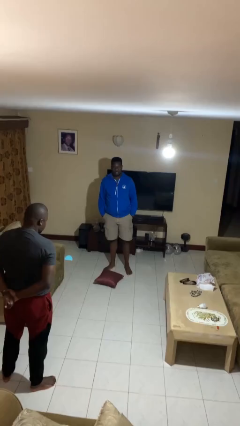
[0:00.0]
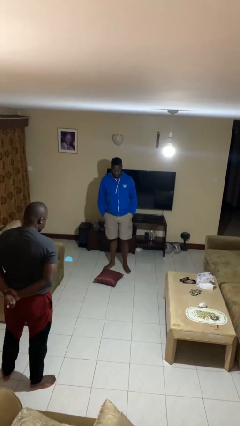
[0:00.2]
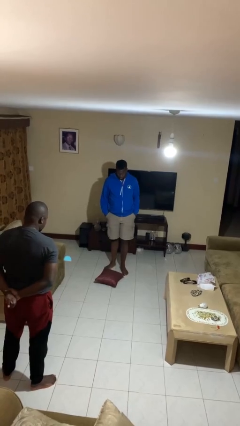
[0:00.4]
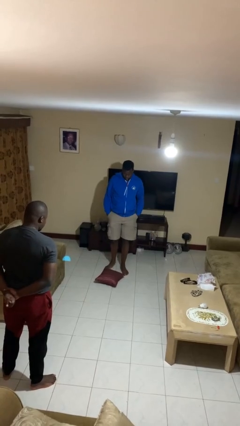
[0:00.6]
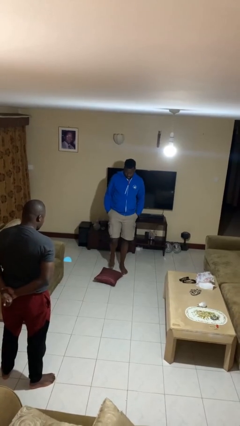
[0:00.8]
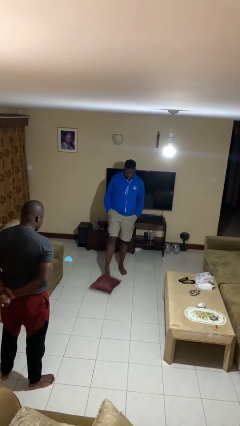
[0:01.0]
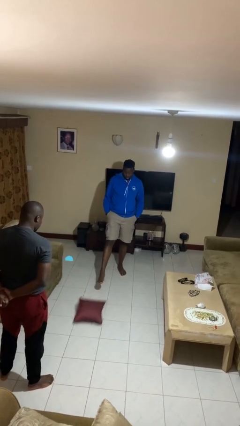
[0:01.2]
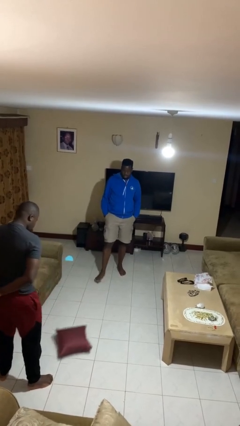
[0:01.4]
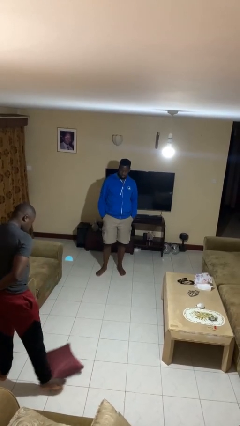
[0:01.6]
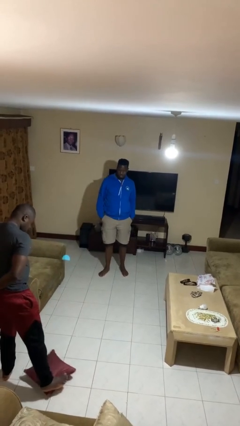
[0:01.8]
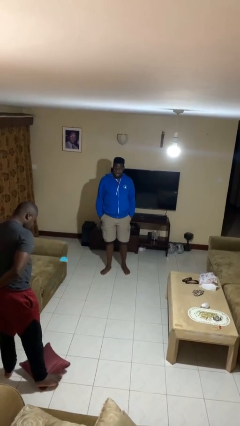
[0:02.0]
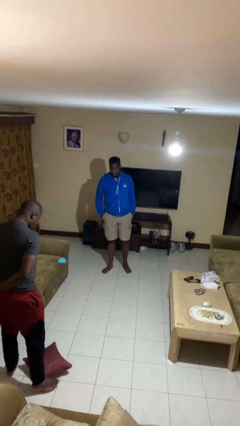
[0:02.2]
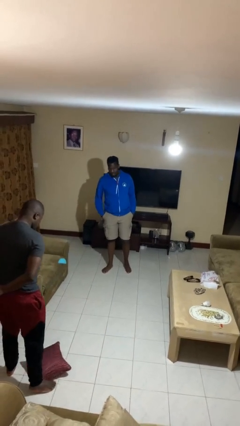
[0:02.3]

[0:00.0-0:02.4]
person kicks object to person

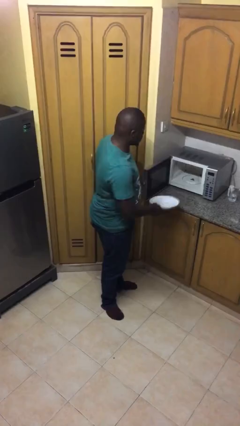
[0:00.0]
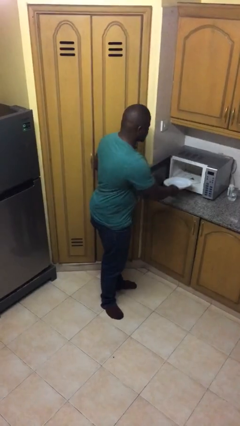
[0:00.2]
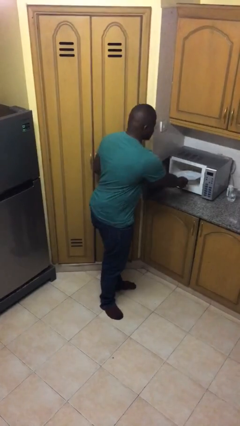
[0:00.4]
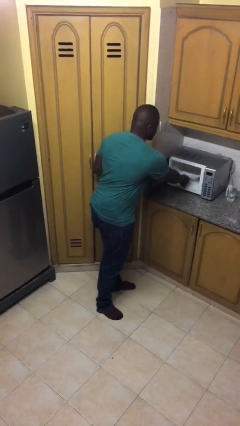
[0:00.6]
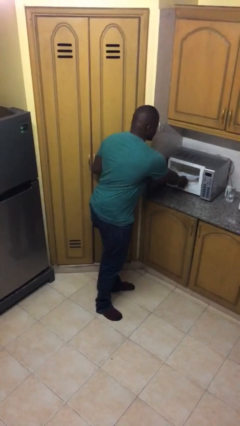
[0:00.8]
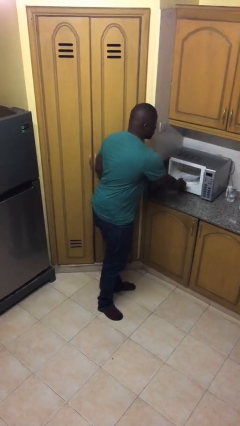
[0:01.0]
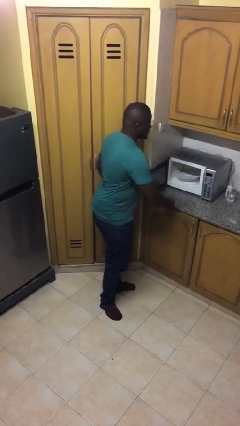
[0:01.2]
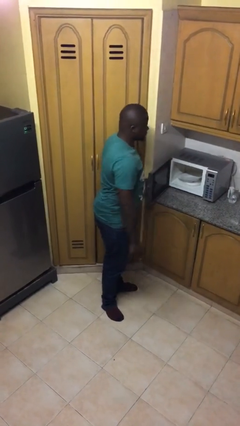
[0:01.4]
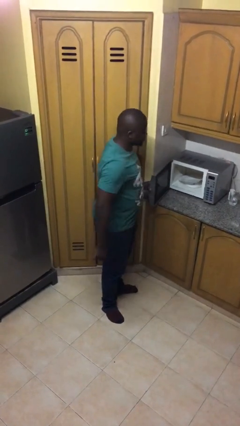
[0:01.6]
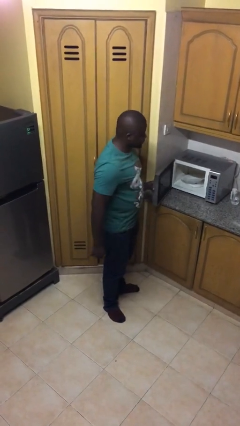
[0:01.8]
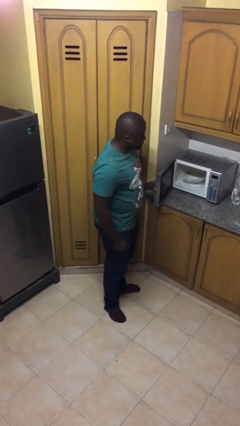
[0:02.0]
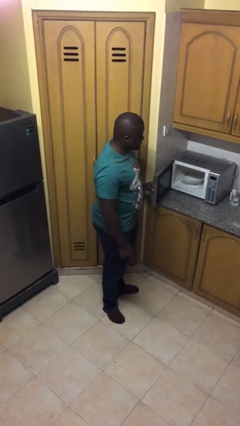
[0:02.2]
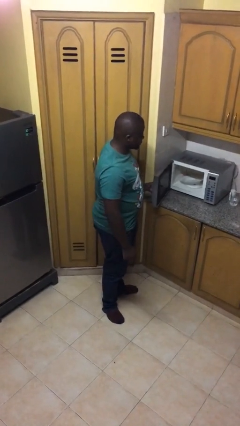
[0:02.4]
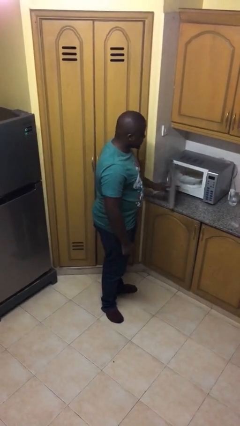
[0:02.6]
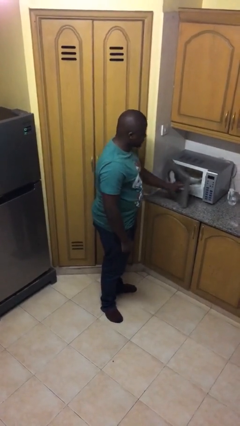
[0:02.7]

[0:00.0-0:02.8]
person puts object into microwave

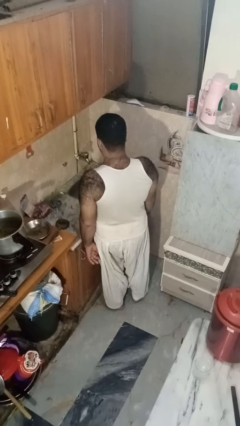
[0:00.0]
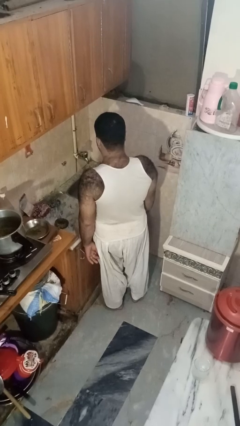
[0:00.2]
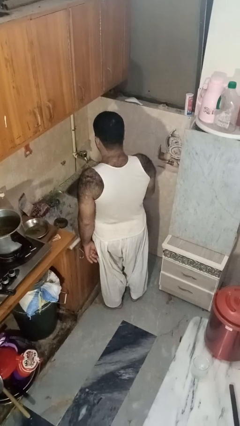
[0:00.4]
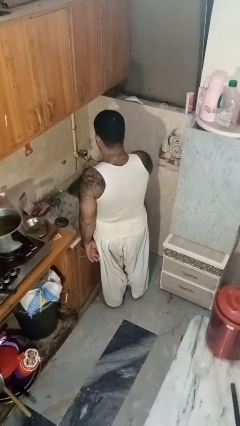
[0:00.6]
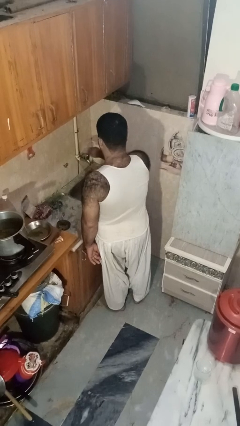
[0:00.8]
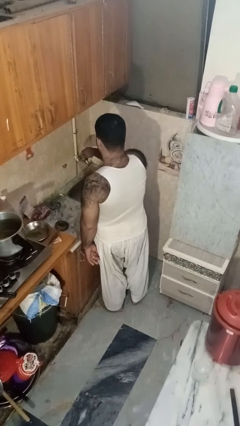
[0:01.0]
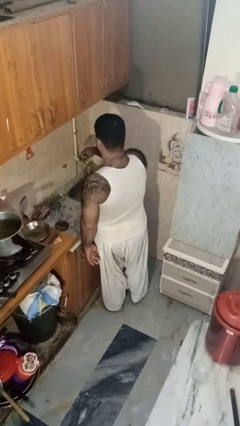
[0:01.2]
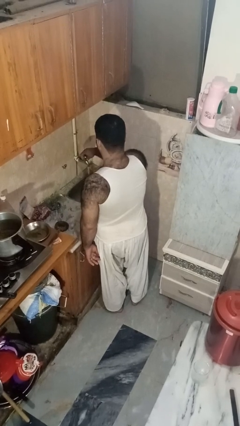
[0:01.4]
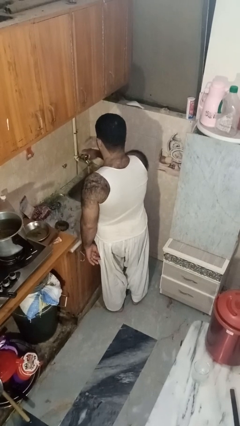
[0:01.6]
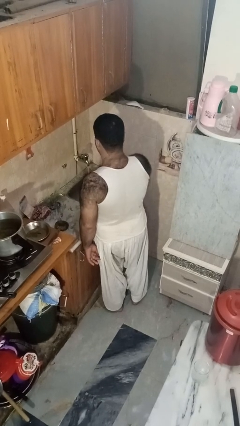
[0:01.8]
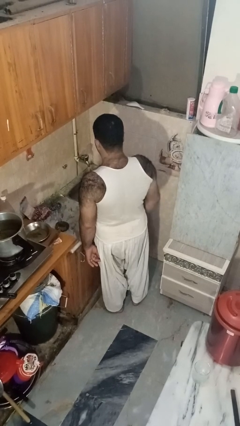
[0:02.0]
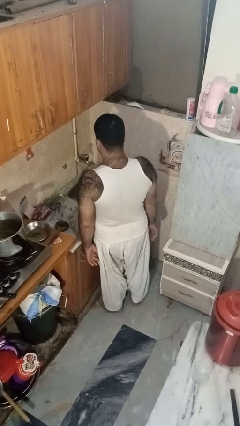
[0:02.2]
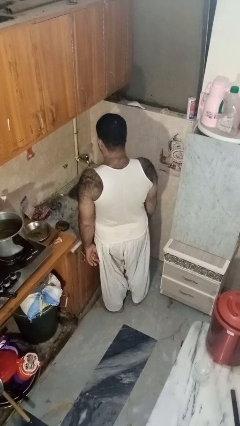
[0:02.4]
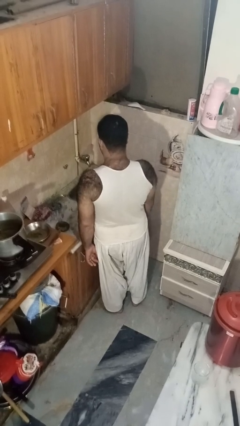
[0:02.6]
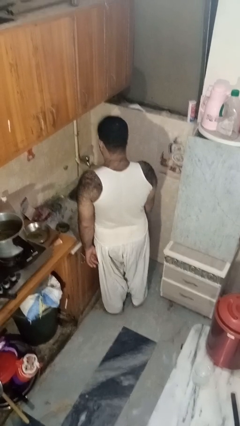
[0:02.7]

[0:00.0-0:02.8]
person turns on faucet

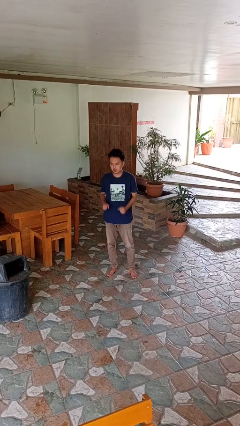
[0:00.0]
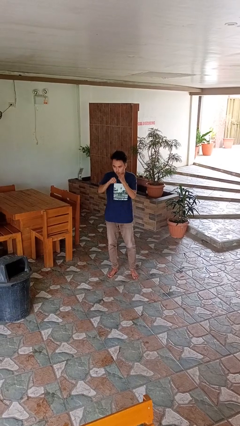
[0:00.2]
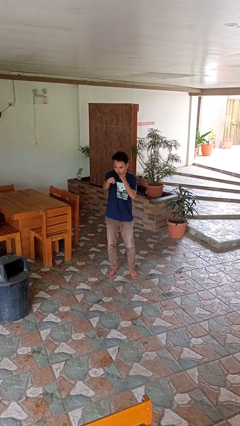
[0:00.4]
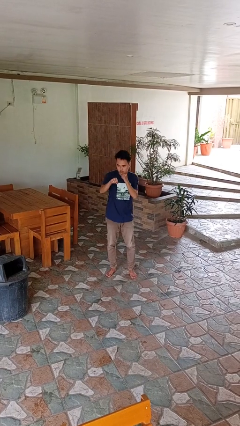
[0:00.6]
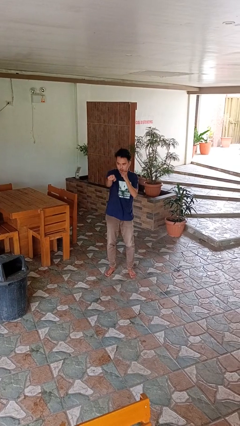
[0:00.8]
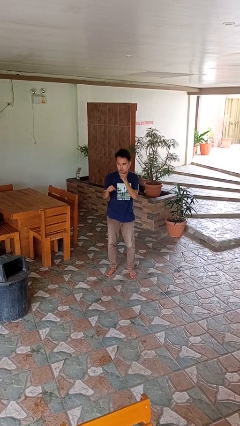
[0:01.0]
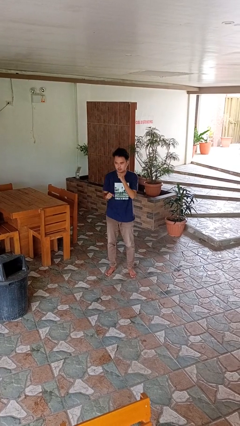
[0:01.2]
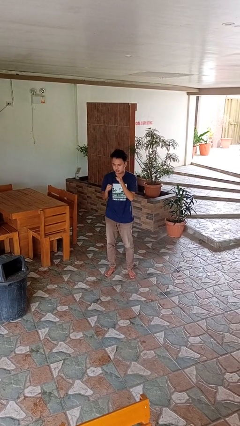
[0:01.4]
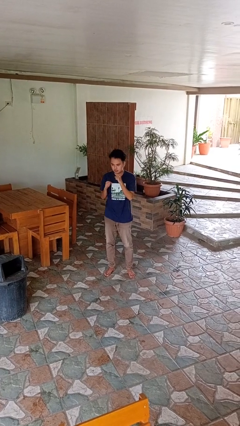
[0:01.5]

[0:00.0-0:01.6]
person punches

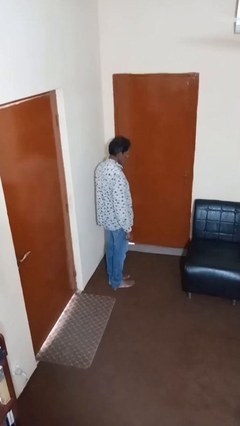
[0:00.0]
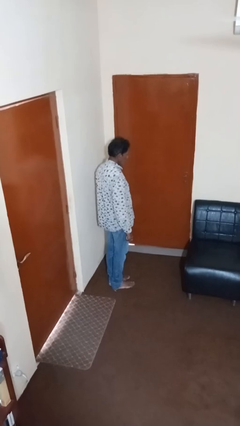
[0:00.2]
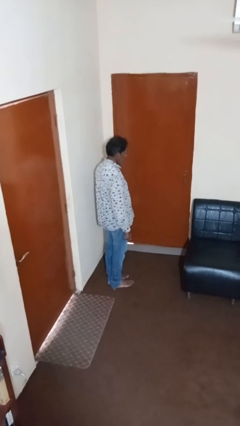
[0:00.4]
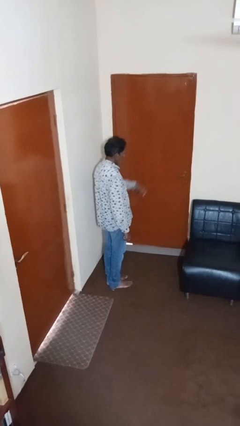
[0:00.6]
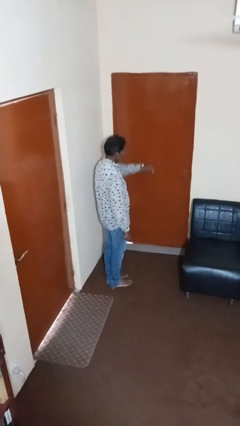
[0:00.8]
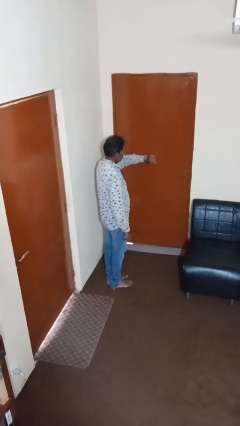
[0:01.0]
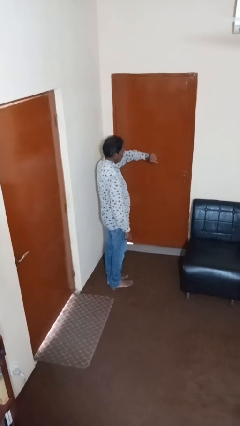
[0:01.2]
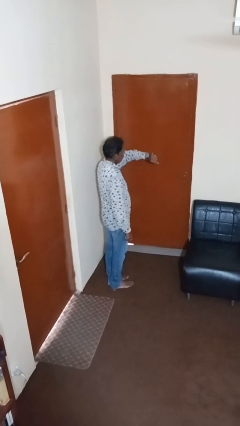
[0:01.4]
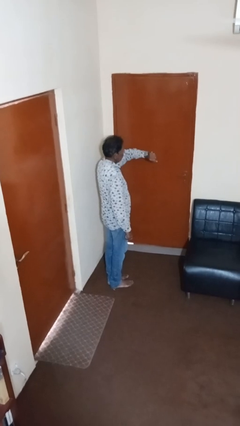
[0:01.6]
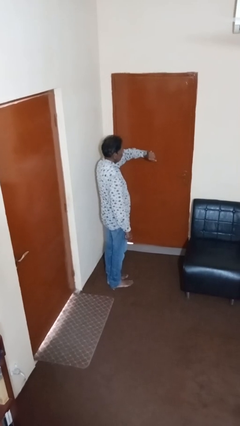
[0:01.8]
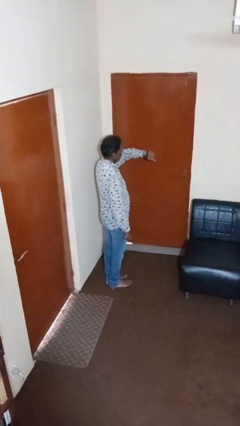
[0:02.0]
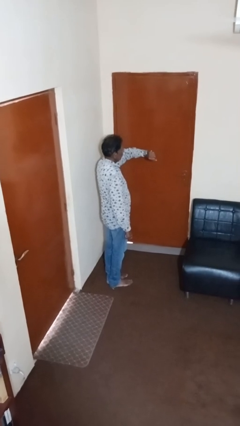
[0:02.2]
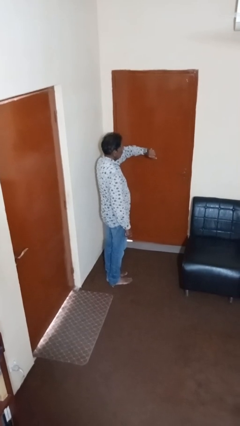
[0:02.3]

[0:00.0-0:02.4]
person looks at wristwatch

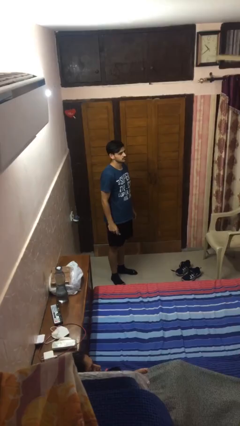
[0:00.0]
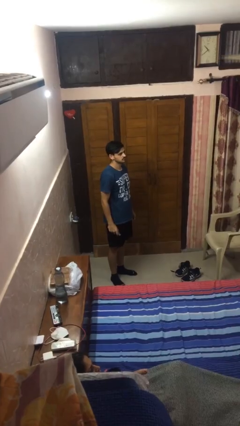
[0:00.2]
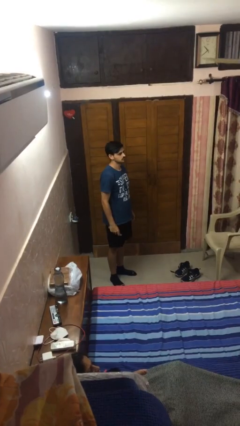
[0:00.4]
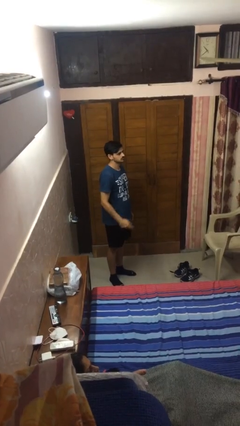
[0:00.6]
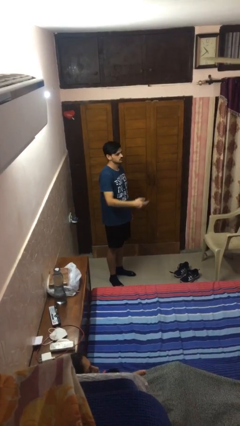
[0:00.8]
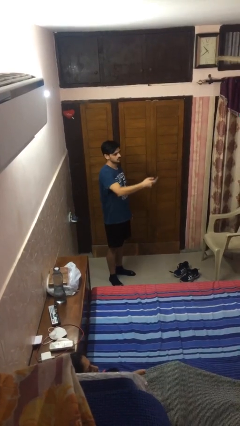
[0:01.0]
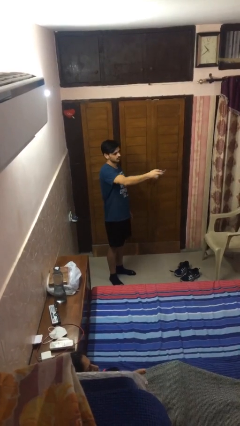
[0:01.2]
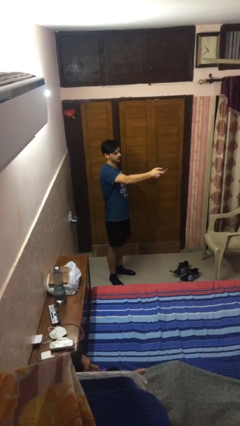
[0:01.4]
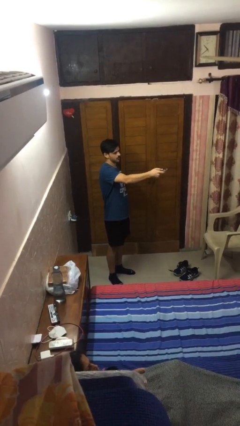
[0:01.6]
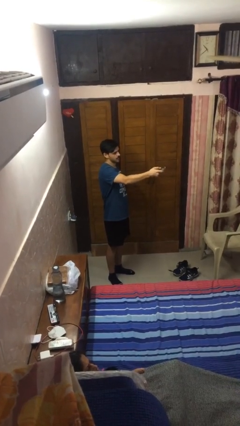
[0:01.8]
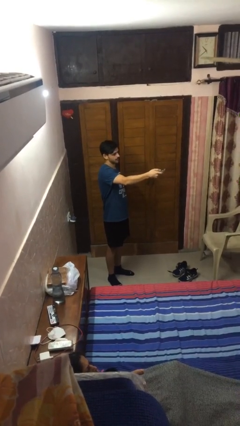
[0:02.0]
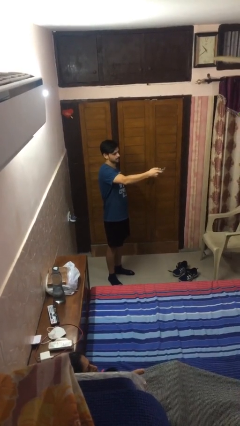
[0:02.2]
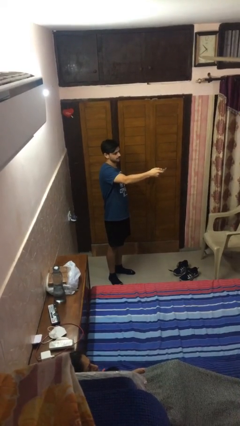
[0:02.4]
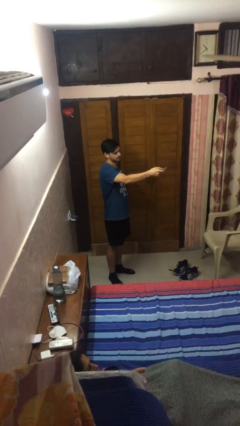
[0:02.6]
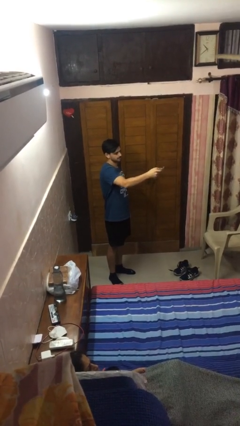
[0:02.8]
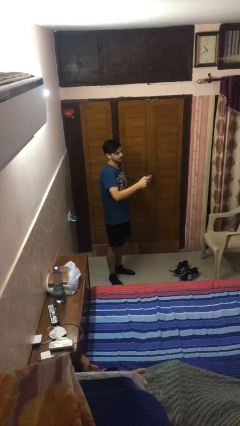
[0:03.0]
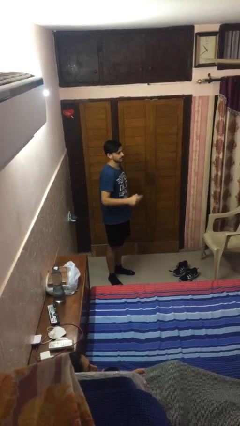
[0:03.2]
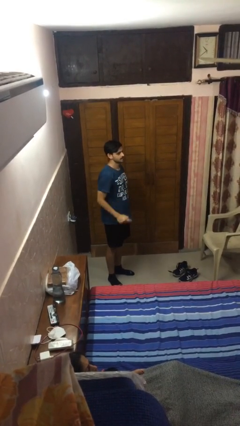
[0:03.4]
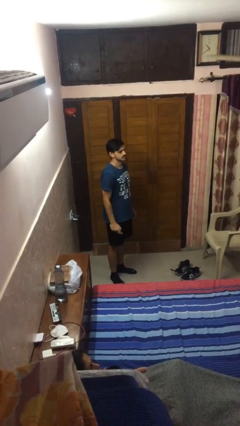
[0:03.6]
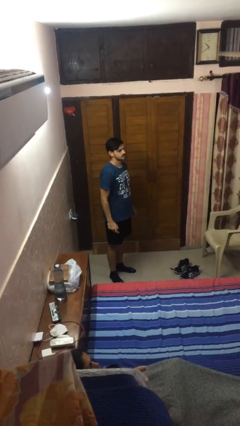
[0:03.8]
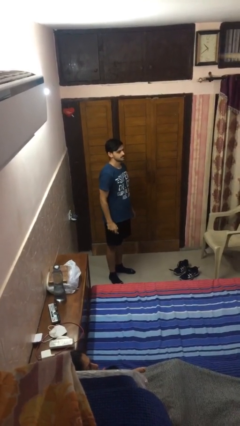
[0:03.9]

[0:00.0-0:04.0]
person uses television remote

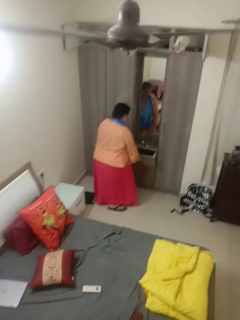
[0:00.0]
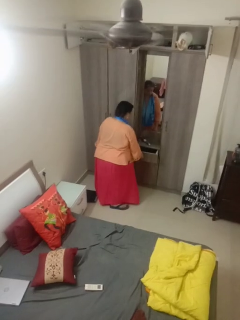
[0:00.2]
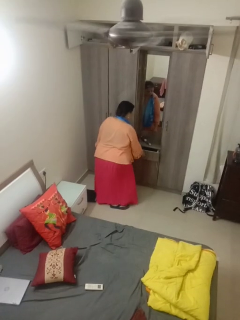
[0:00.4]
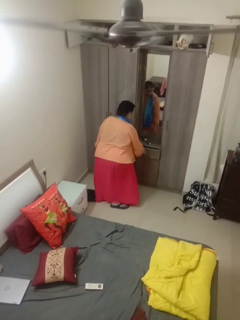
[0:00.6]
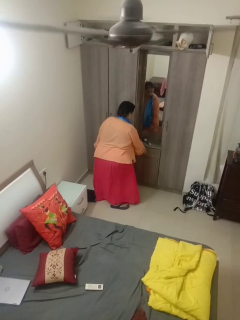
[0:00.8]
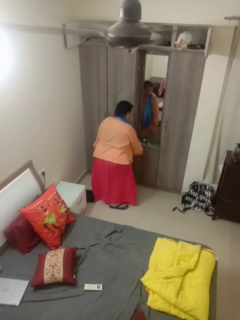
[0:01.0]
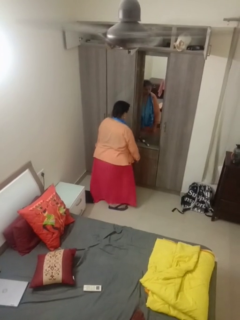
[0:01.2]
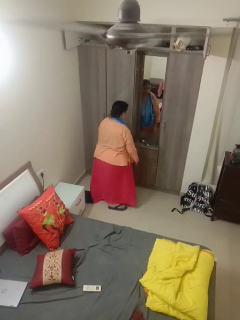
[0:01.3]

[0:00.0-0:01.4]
person closes dresser drawer
